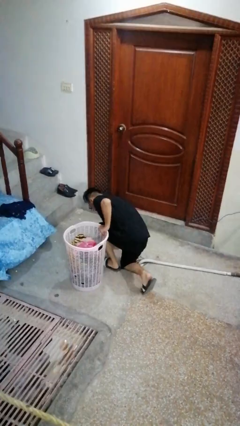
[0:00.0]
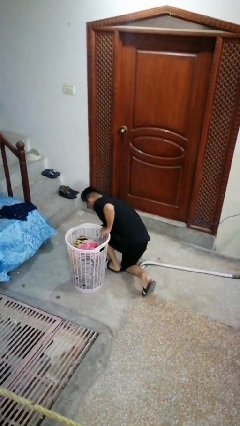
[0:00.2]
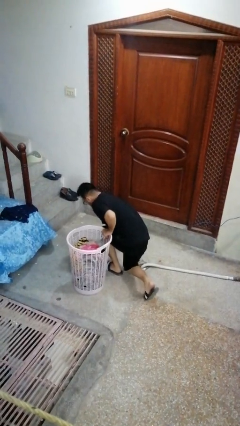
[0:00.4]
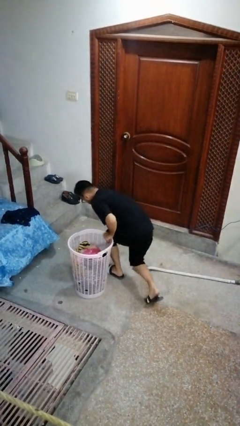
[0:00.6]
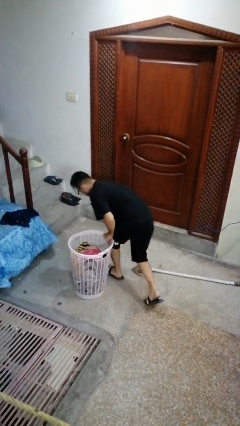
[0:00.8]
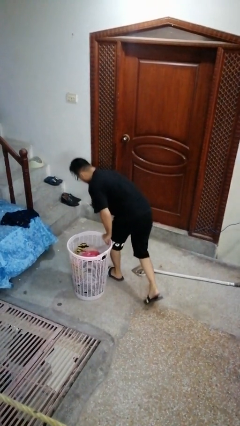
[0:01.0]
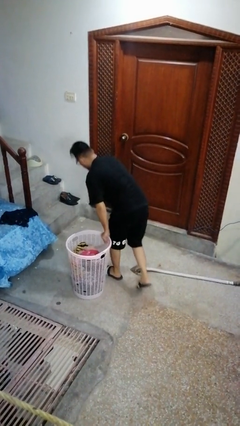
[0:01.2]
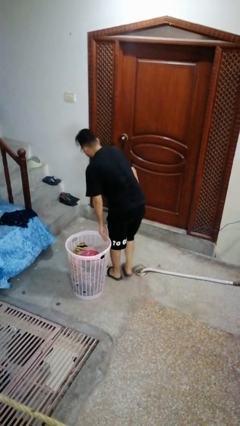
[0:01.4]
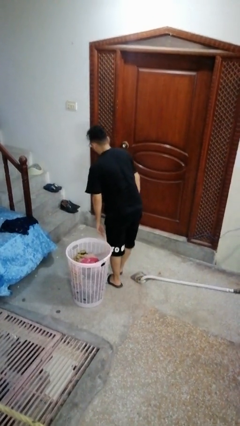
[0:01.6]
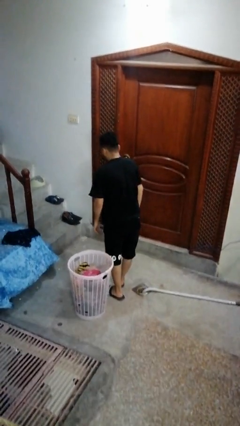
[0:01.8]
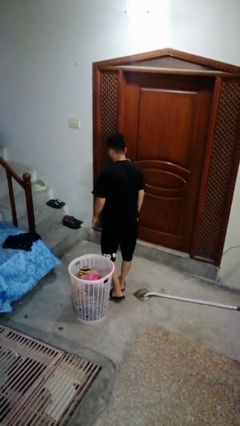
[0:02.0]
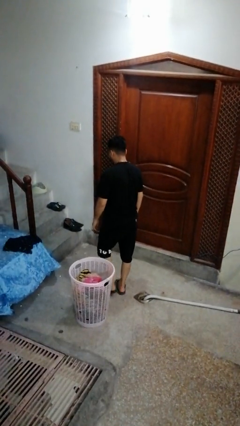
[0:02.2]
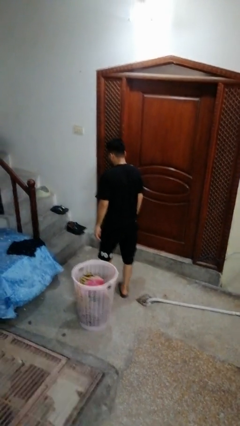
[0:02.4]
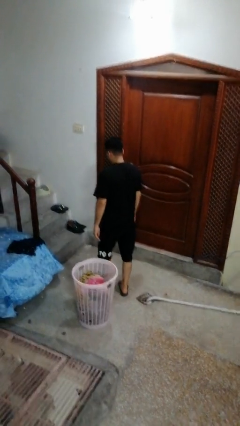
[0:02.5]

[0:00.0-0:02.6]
person stands up from floor

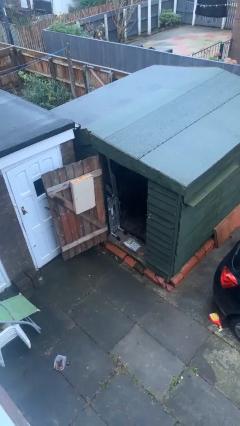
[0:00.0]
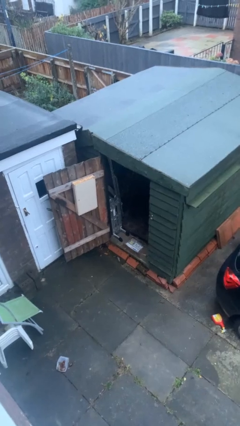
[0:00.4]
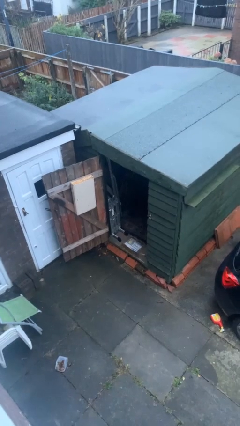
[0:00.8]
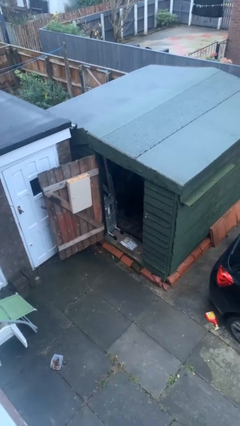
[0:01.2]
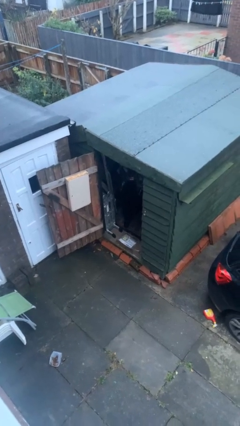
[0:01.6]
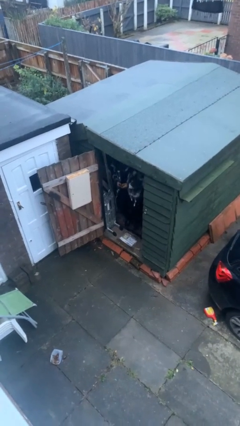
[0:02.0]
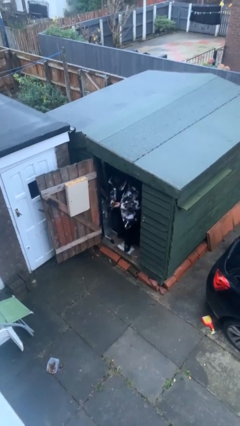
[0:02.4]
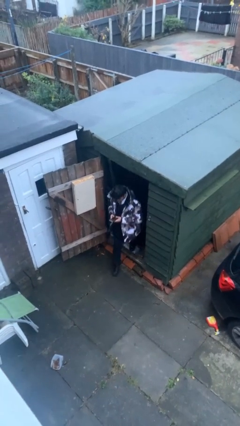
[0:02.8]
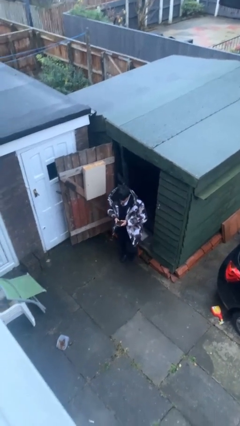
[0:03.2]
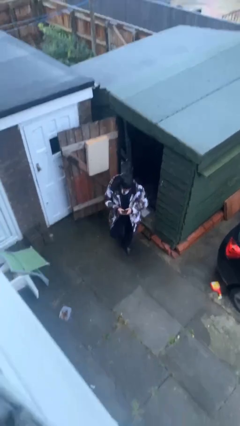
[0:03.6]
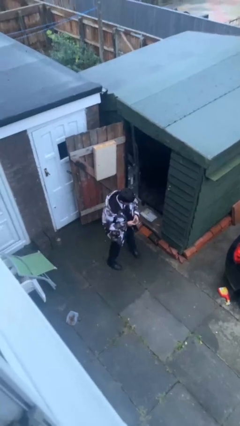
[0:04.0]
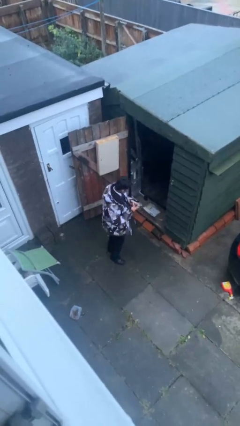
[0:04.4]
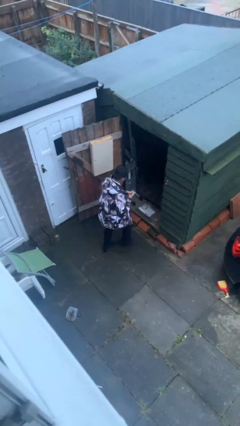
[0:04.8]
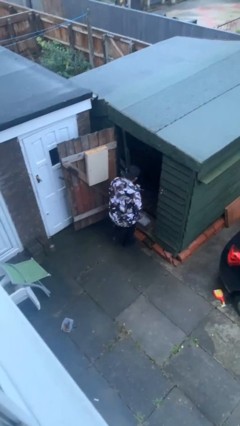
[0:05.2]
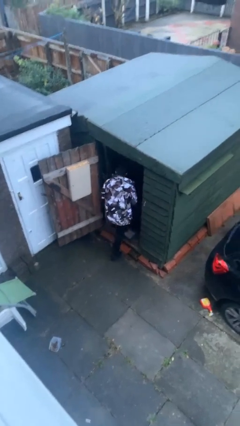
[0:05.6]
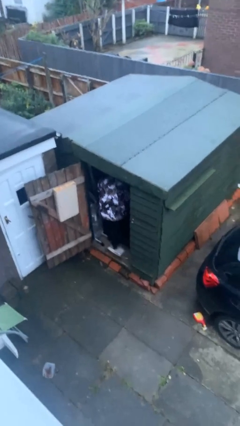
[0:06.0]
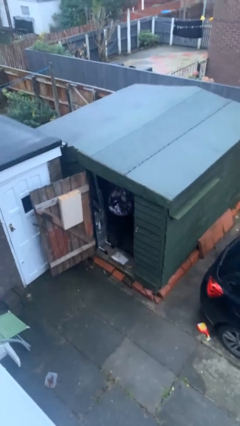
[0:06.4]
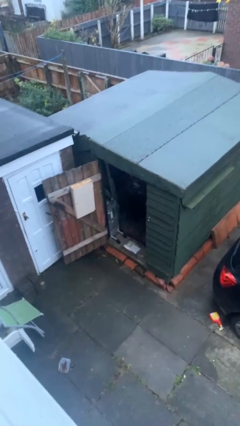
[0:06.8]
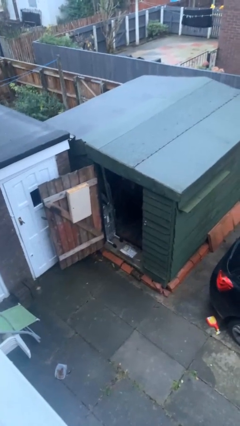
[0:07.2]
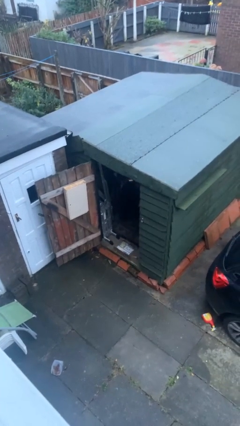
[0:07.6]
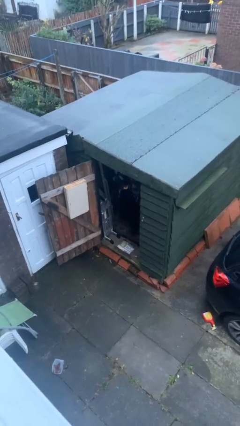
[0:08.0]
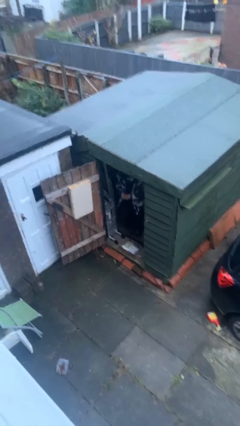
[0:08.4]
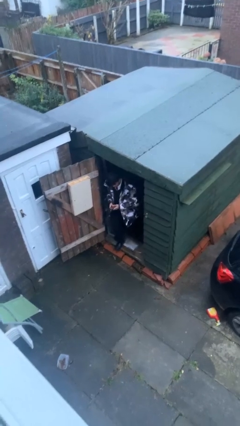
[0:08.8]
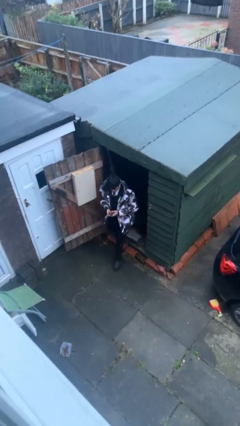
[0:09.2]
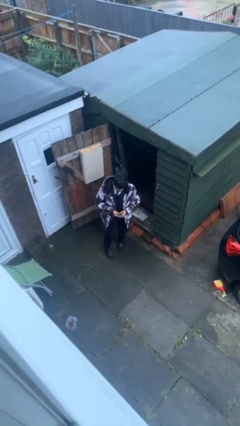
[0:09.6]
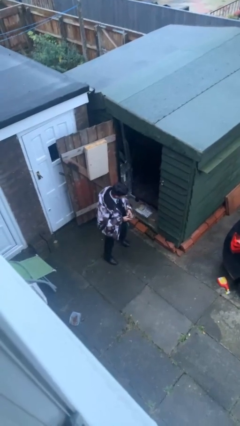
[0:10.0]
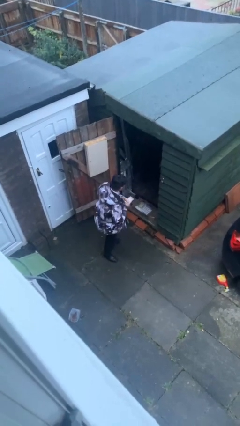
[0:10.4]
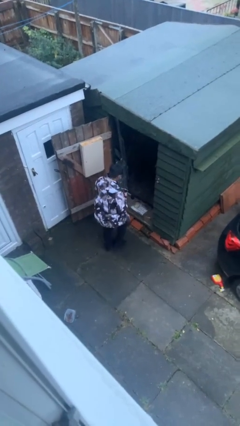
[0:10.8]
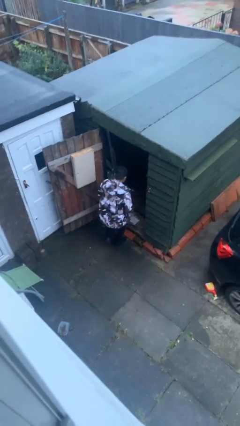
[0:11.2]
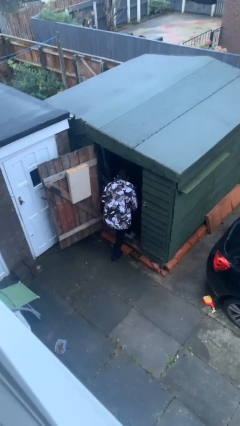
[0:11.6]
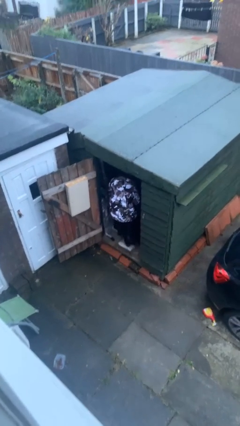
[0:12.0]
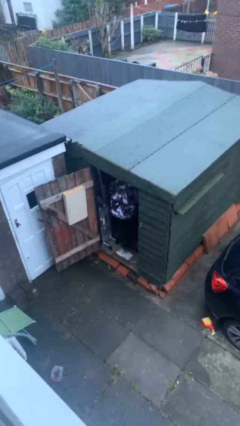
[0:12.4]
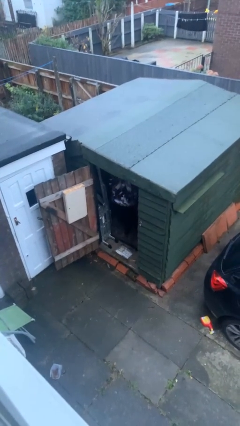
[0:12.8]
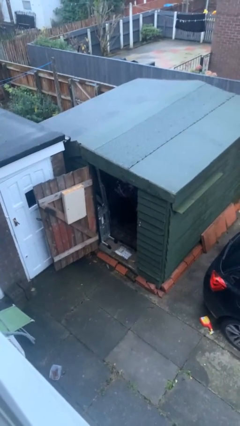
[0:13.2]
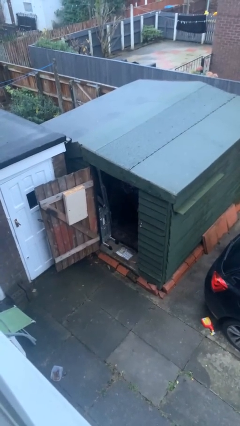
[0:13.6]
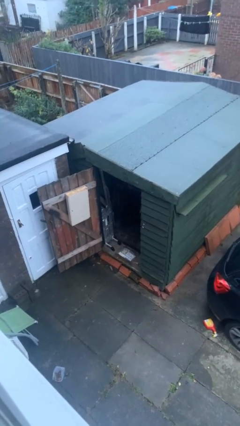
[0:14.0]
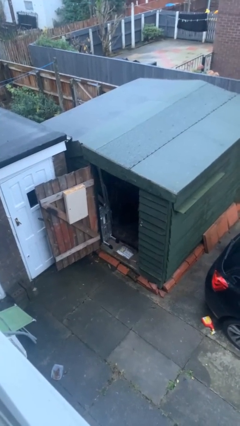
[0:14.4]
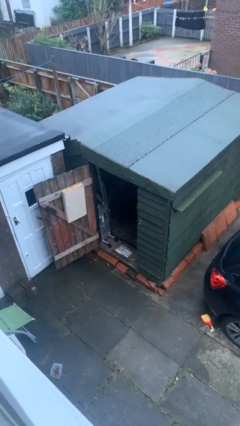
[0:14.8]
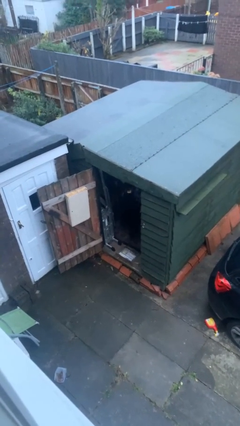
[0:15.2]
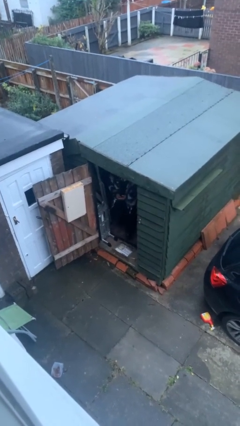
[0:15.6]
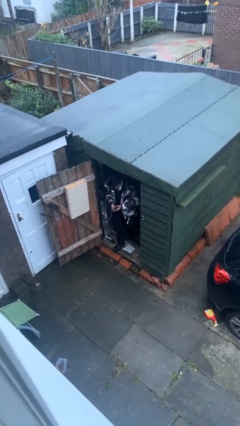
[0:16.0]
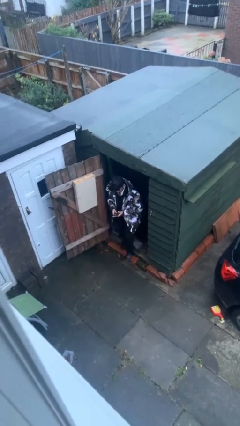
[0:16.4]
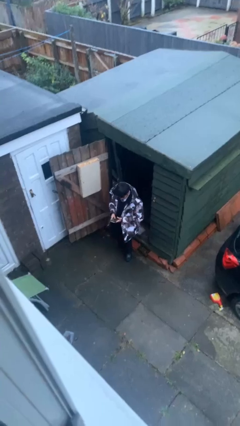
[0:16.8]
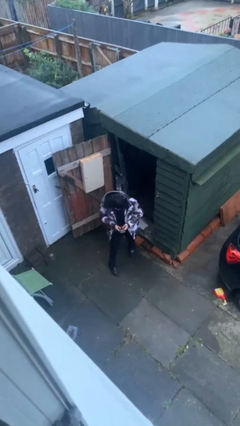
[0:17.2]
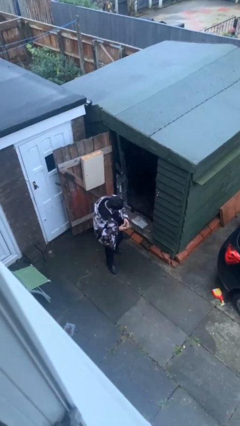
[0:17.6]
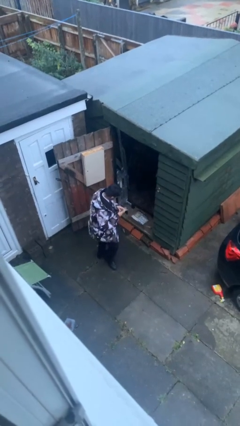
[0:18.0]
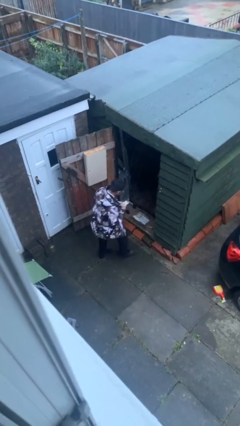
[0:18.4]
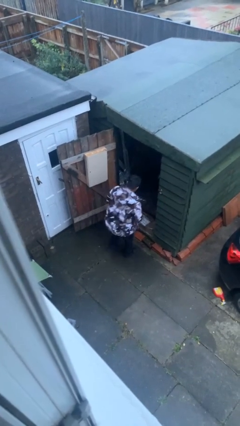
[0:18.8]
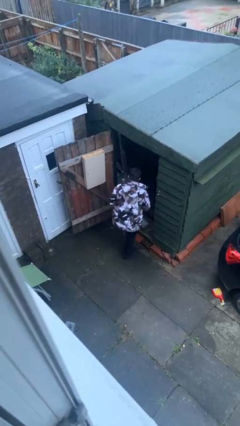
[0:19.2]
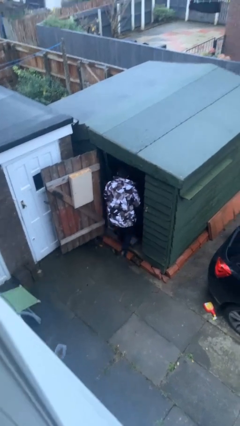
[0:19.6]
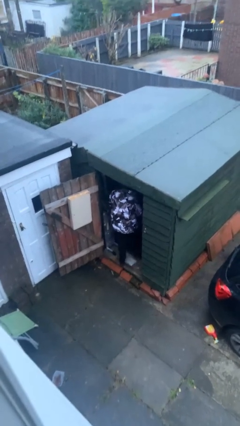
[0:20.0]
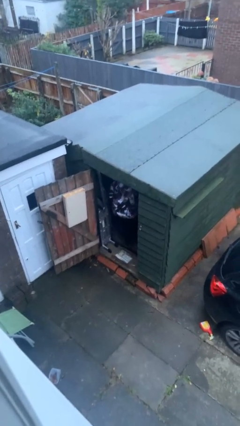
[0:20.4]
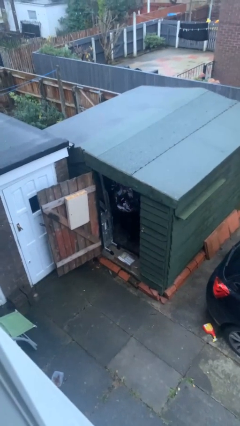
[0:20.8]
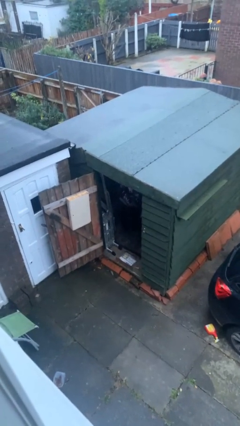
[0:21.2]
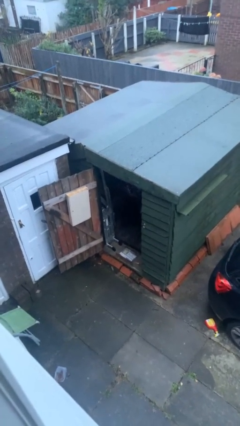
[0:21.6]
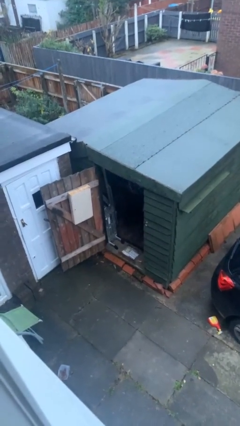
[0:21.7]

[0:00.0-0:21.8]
person texts on phone

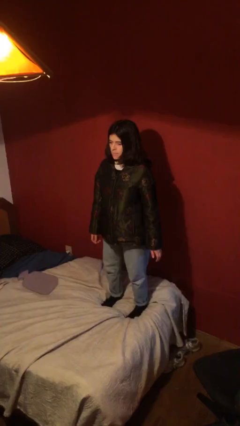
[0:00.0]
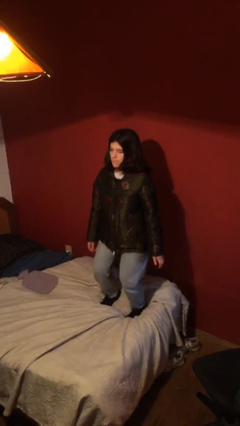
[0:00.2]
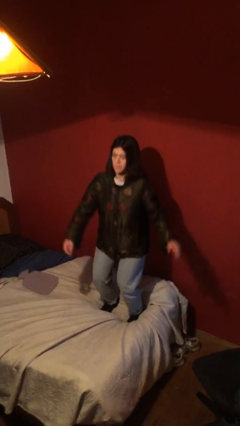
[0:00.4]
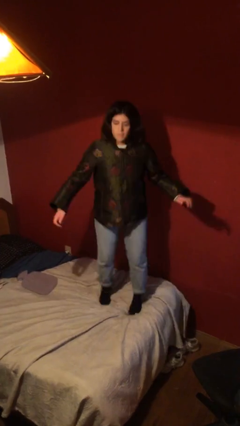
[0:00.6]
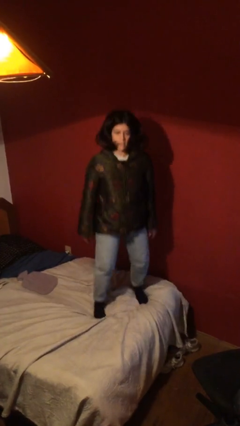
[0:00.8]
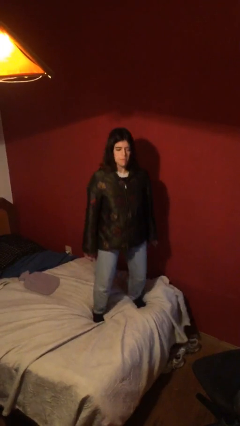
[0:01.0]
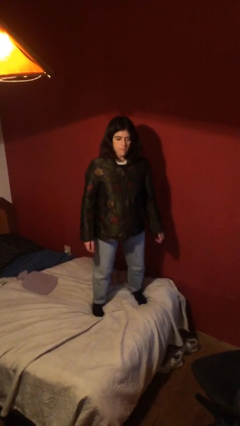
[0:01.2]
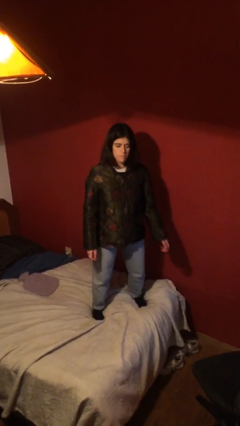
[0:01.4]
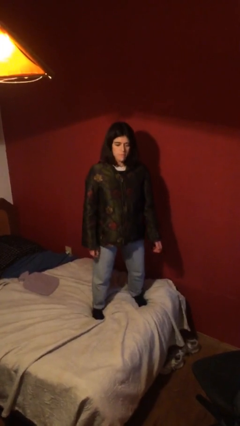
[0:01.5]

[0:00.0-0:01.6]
person jumps on bed

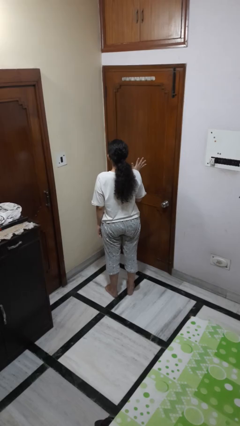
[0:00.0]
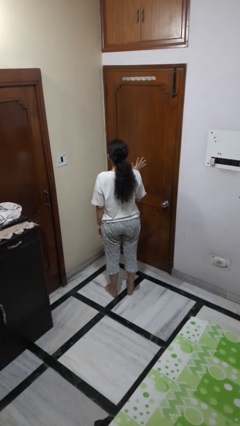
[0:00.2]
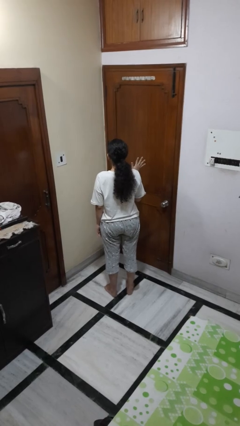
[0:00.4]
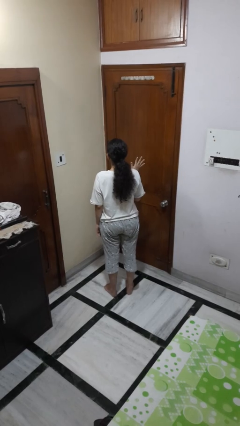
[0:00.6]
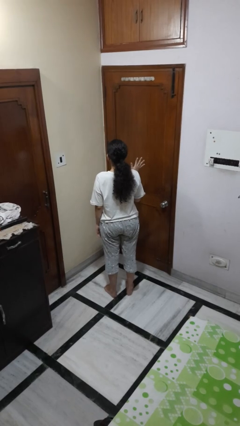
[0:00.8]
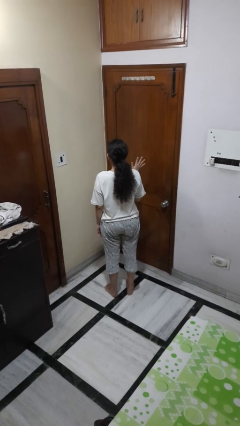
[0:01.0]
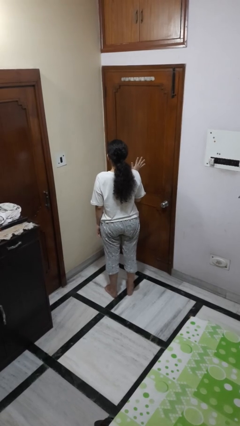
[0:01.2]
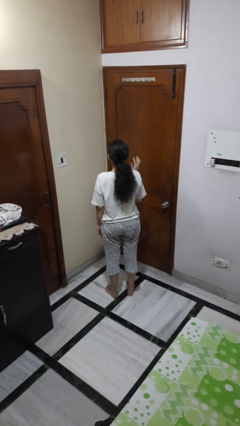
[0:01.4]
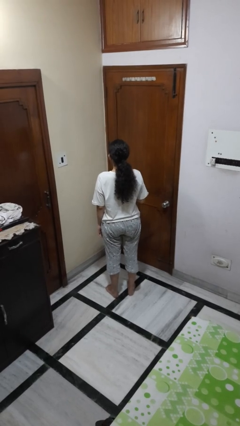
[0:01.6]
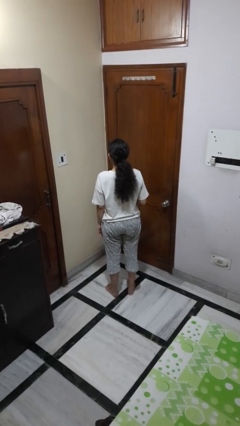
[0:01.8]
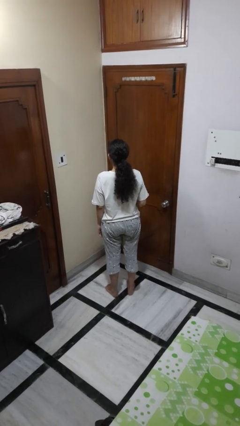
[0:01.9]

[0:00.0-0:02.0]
person gestures number five
